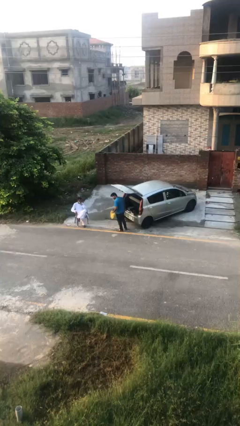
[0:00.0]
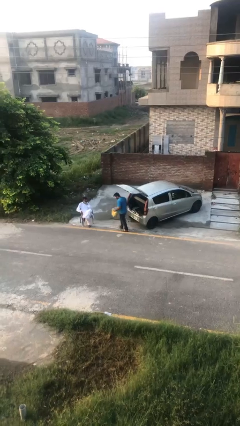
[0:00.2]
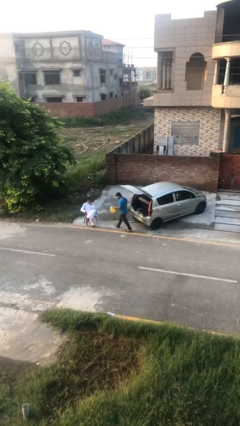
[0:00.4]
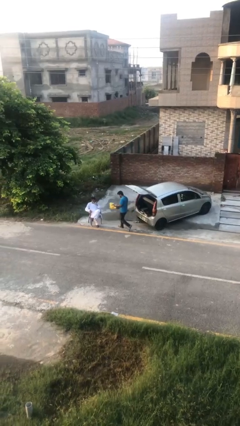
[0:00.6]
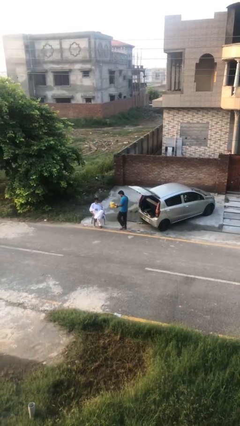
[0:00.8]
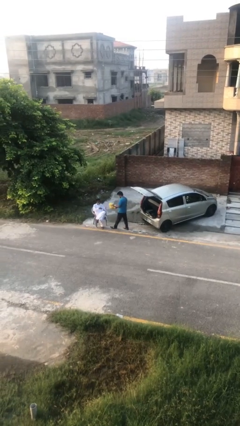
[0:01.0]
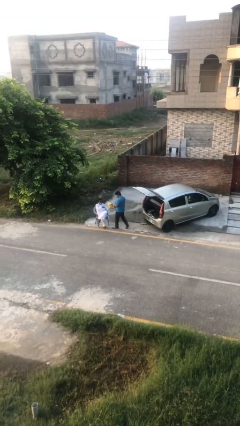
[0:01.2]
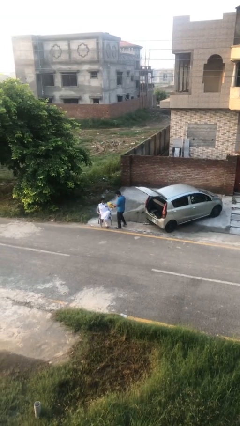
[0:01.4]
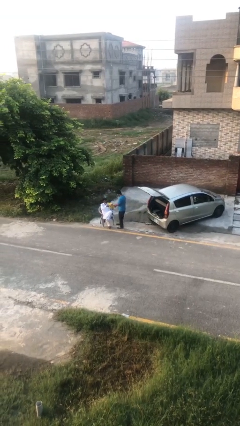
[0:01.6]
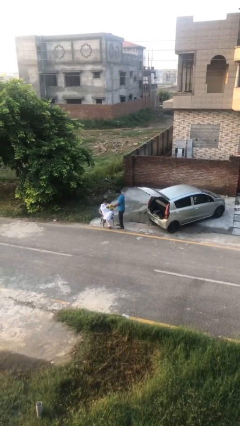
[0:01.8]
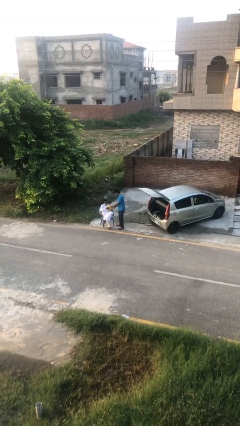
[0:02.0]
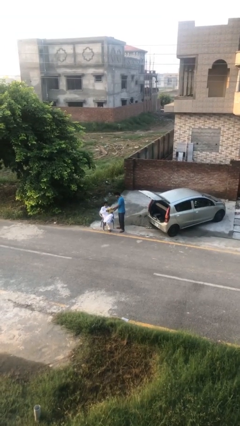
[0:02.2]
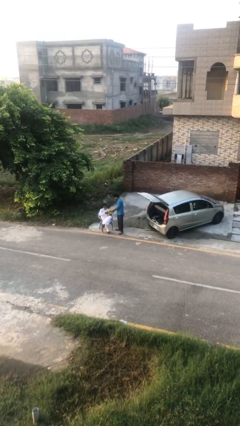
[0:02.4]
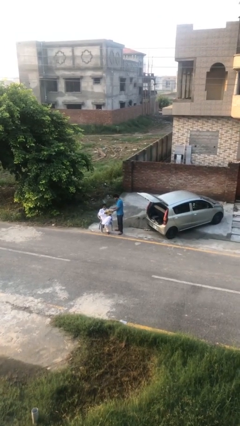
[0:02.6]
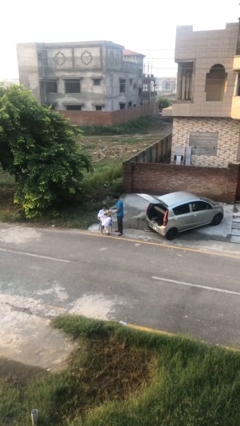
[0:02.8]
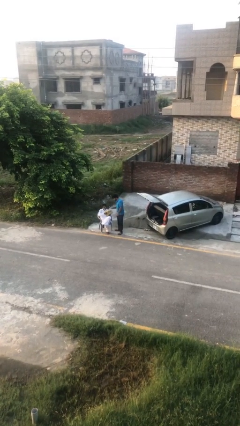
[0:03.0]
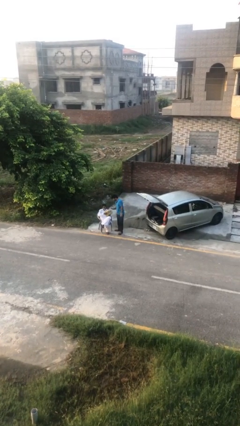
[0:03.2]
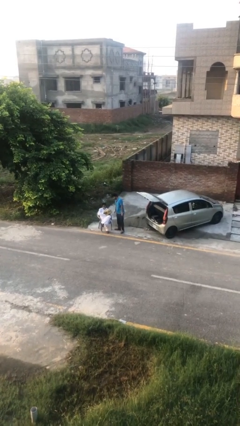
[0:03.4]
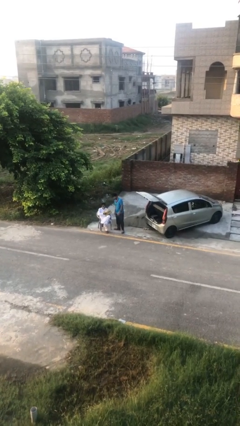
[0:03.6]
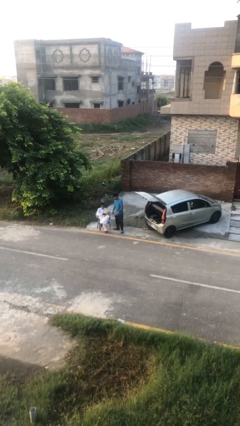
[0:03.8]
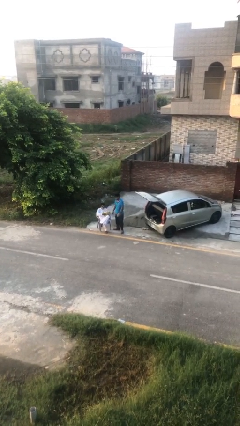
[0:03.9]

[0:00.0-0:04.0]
person transfers object to person

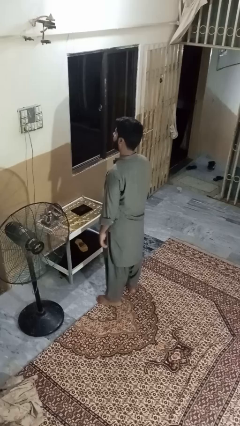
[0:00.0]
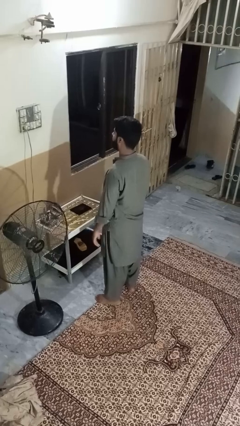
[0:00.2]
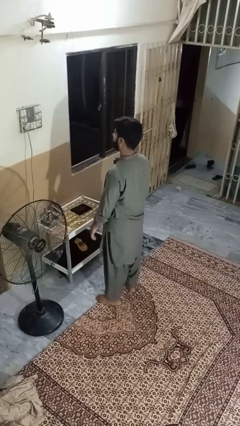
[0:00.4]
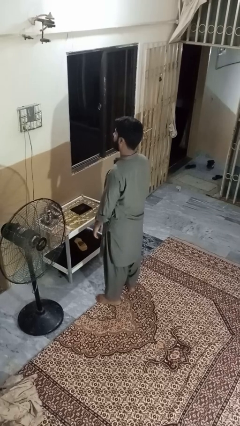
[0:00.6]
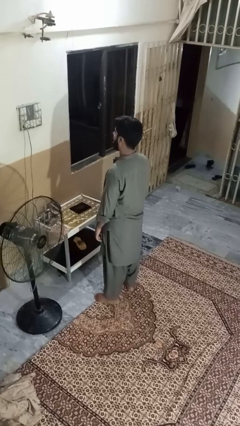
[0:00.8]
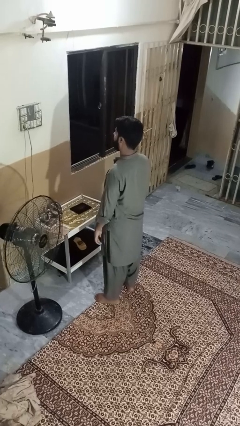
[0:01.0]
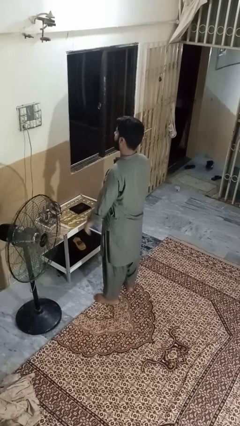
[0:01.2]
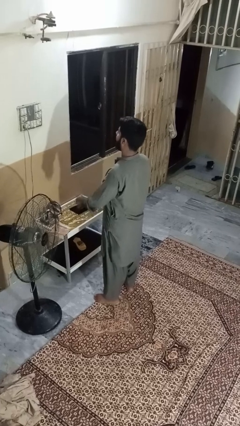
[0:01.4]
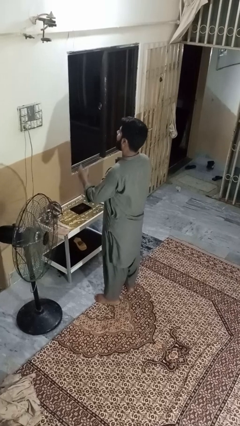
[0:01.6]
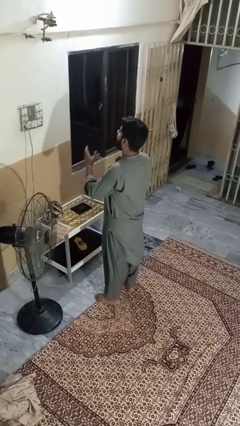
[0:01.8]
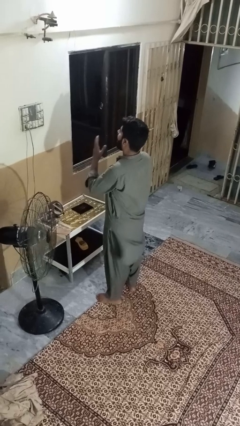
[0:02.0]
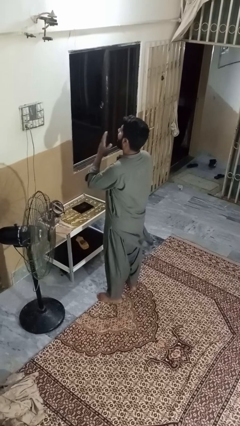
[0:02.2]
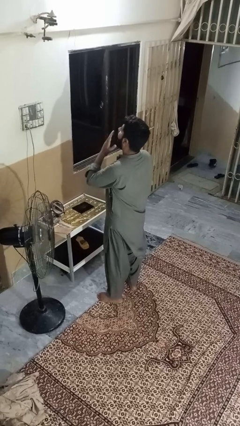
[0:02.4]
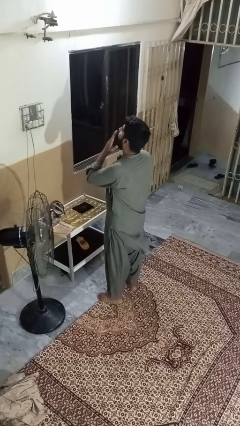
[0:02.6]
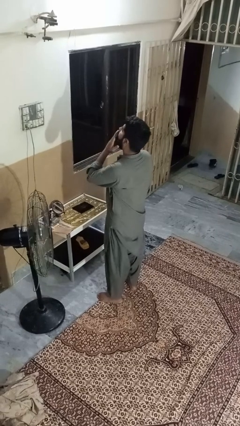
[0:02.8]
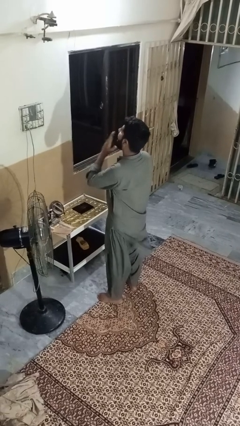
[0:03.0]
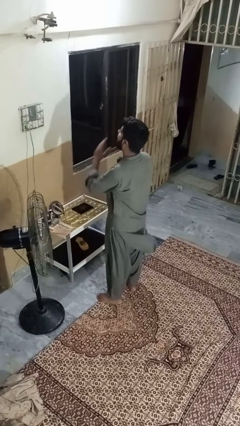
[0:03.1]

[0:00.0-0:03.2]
person yawns

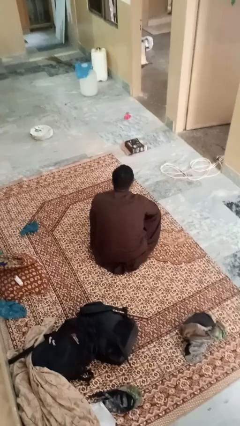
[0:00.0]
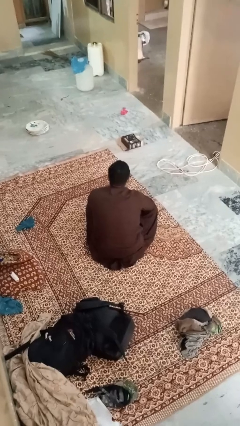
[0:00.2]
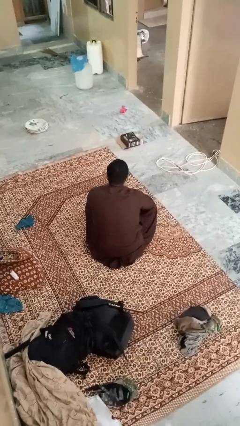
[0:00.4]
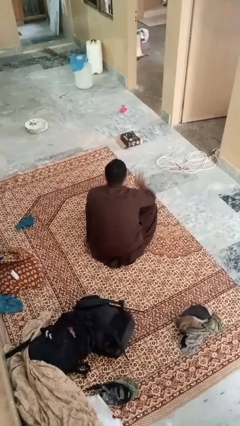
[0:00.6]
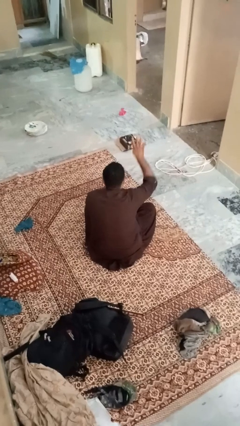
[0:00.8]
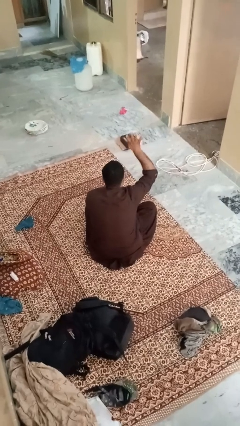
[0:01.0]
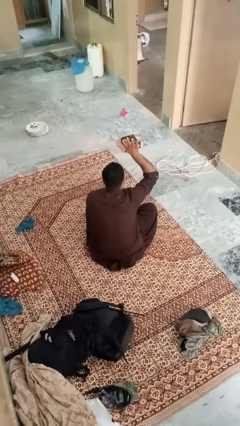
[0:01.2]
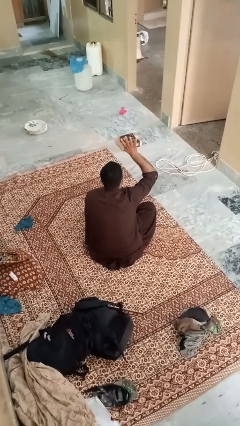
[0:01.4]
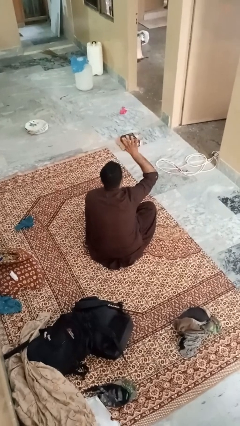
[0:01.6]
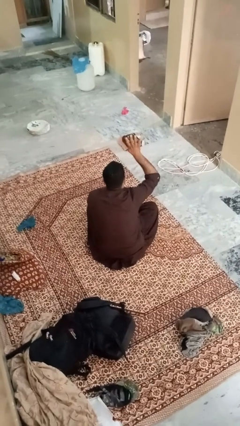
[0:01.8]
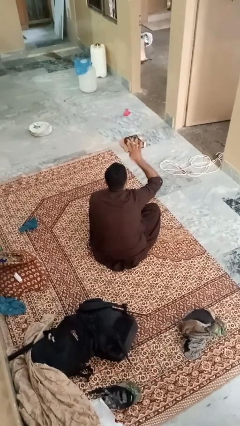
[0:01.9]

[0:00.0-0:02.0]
person gestures number four

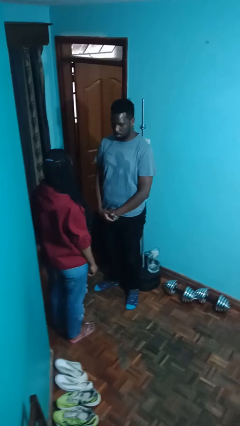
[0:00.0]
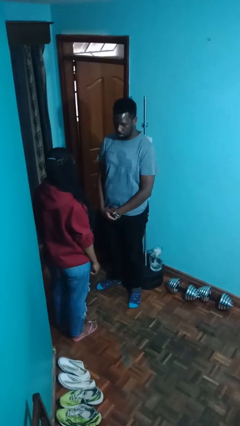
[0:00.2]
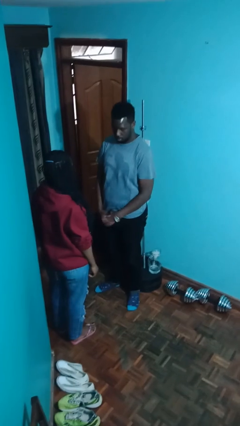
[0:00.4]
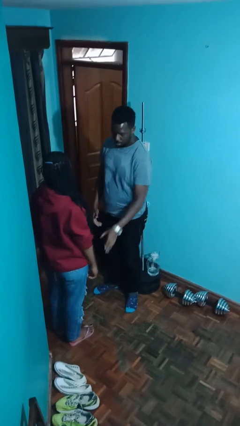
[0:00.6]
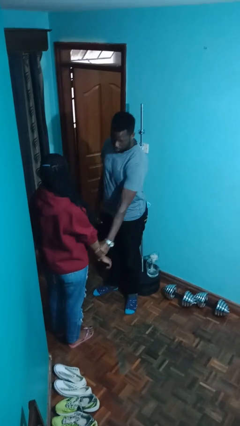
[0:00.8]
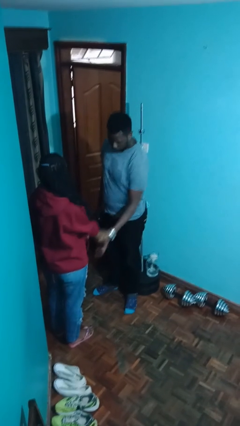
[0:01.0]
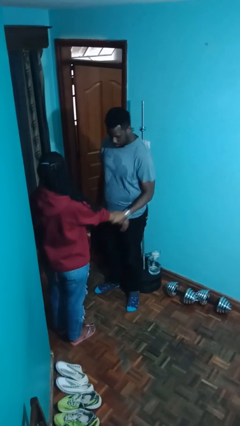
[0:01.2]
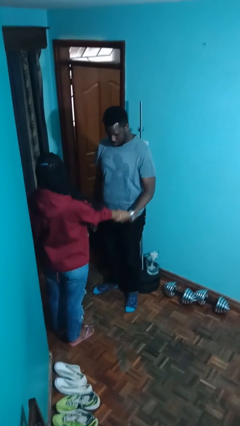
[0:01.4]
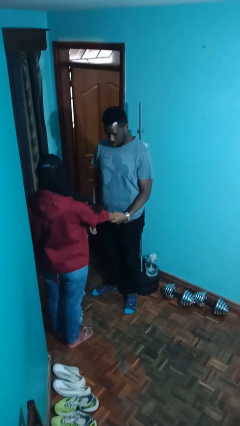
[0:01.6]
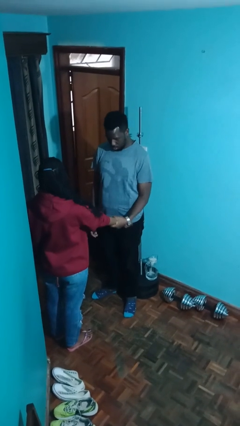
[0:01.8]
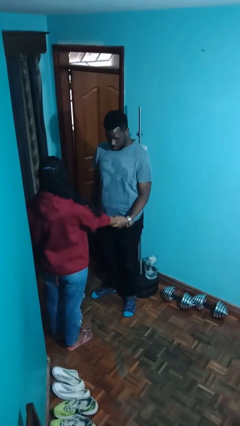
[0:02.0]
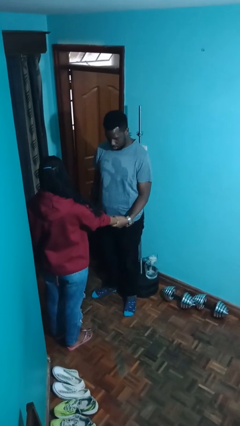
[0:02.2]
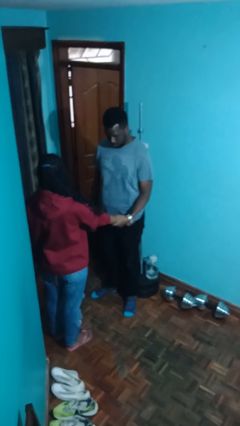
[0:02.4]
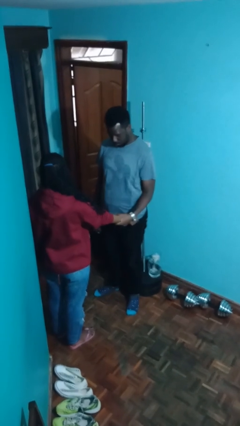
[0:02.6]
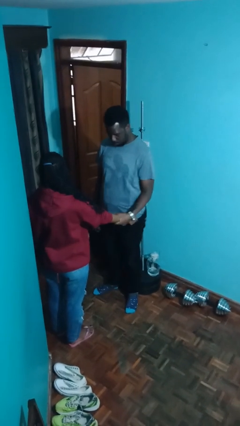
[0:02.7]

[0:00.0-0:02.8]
person grabs person by forearm

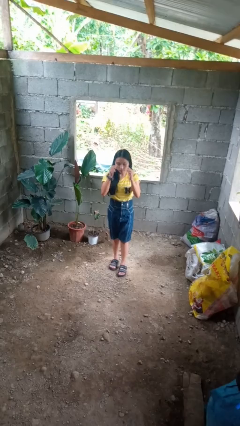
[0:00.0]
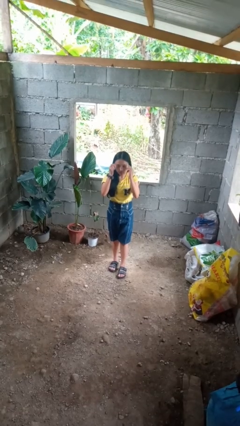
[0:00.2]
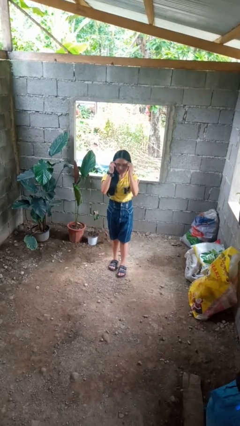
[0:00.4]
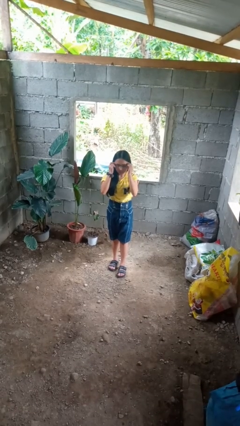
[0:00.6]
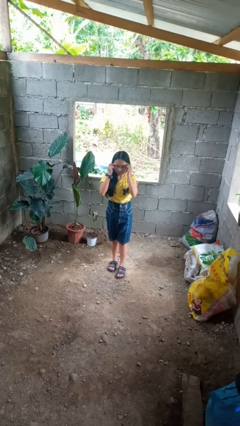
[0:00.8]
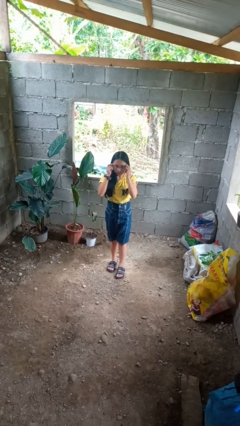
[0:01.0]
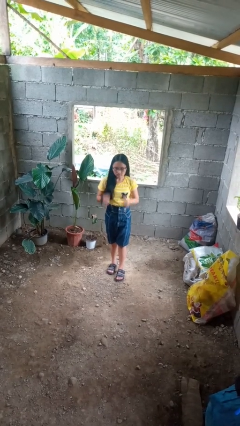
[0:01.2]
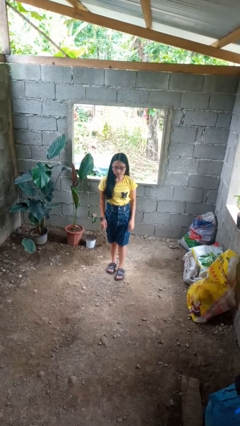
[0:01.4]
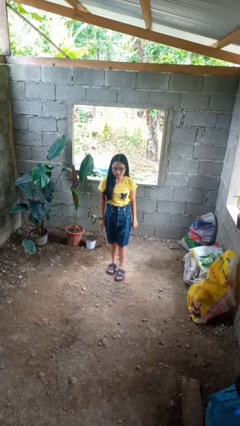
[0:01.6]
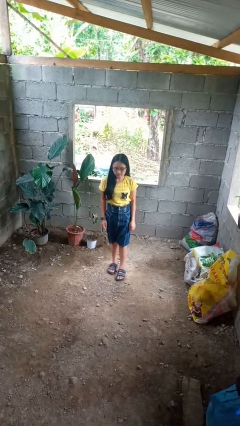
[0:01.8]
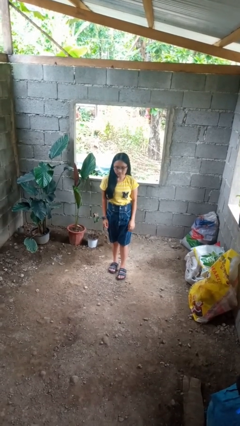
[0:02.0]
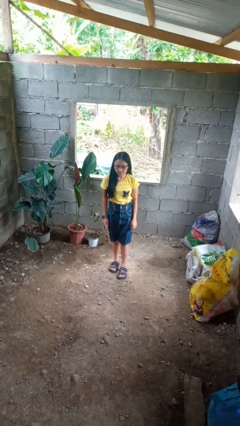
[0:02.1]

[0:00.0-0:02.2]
person puts on glasses

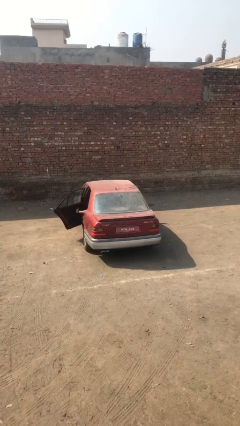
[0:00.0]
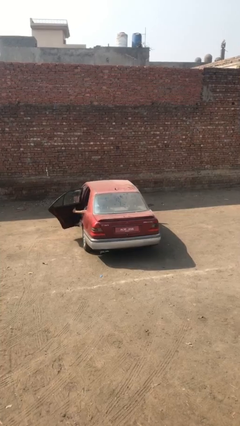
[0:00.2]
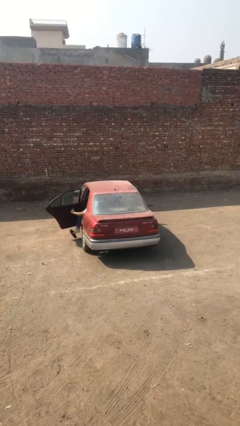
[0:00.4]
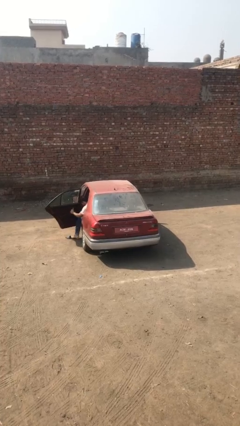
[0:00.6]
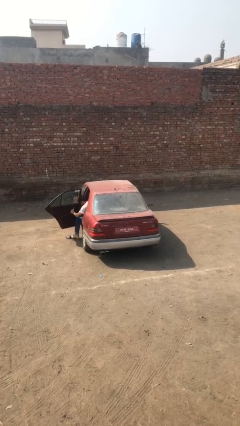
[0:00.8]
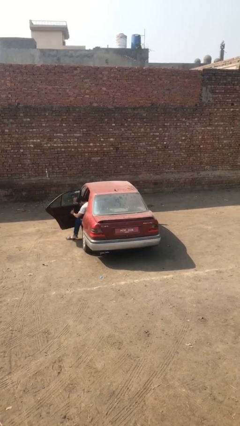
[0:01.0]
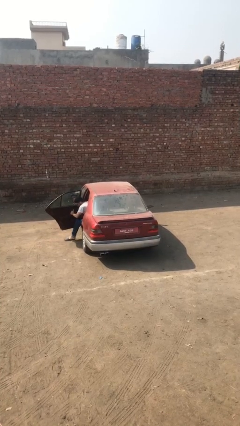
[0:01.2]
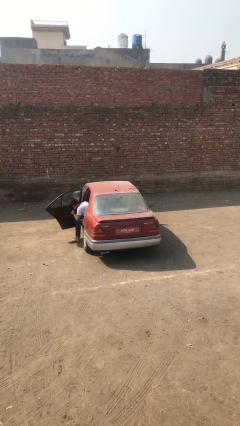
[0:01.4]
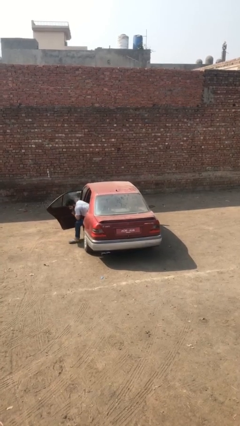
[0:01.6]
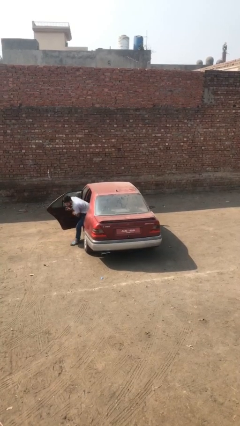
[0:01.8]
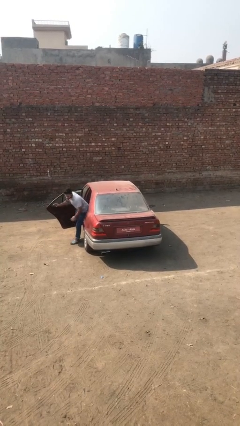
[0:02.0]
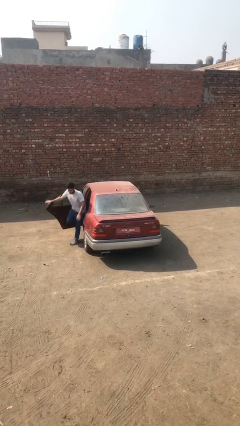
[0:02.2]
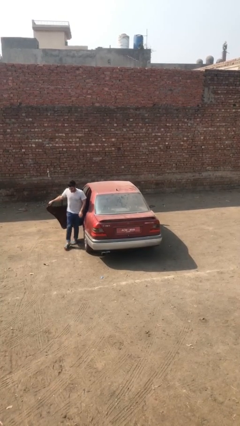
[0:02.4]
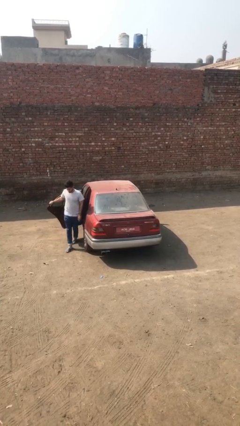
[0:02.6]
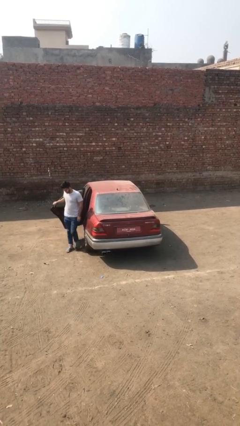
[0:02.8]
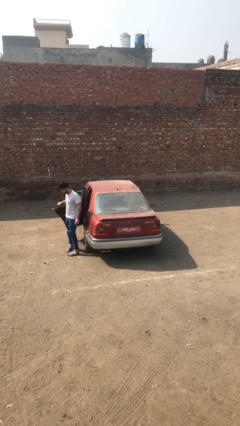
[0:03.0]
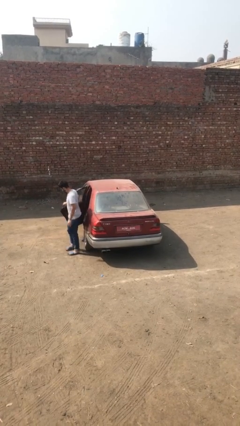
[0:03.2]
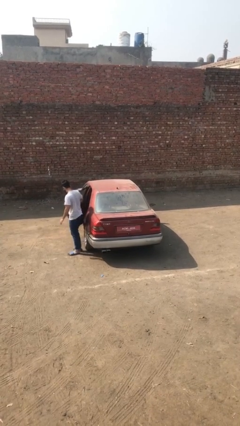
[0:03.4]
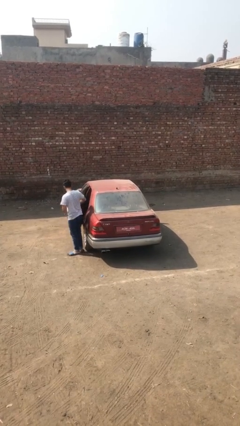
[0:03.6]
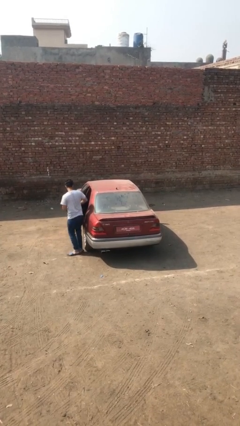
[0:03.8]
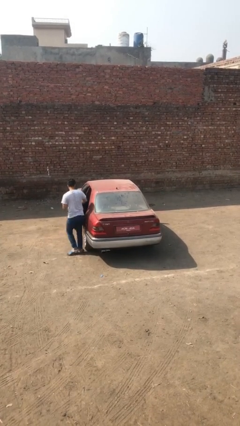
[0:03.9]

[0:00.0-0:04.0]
car drops off person
